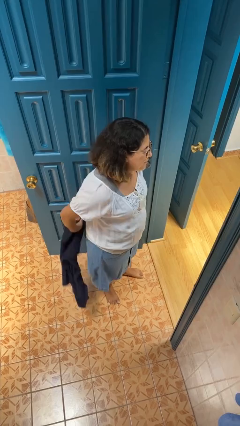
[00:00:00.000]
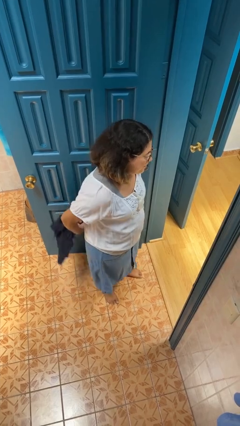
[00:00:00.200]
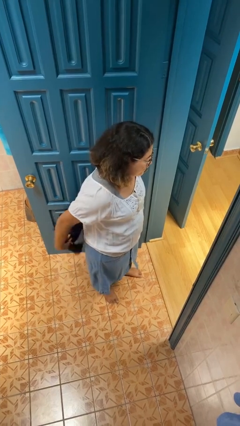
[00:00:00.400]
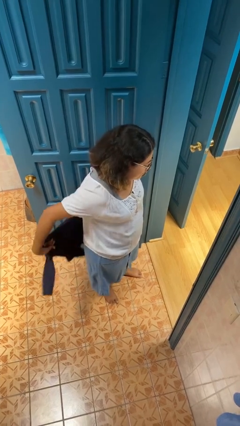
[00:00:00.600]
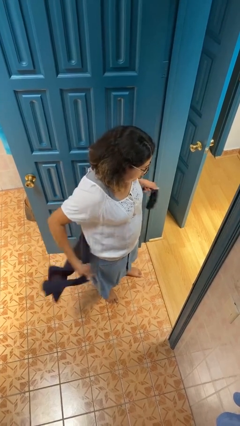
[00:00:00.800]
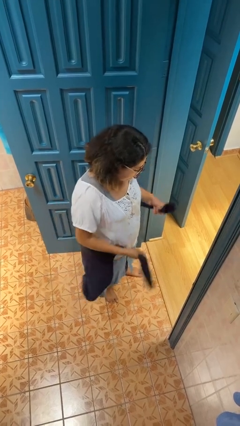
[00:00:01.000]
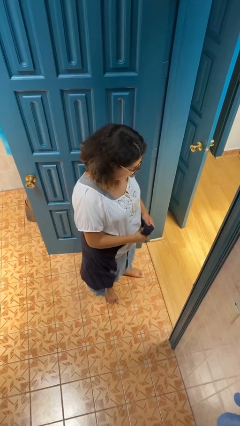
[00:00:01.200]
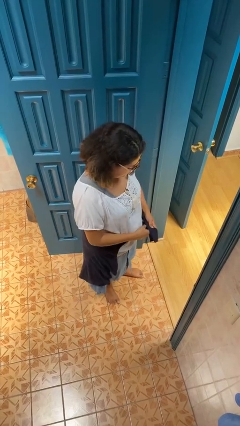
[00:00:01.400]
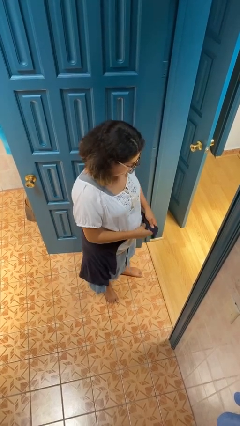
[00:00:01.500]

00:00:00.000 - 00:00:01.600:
person ties jacket around waist

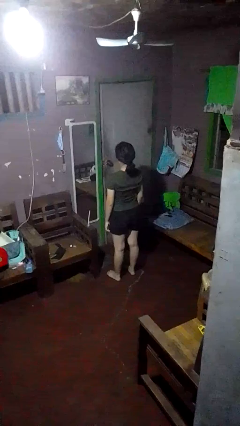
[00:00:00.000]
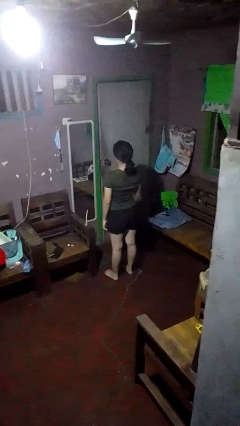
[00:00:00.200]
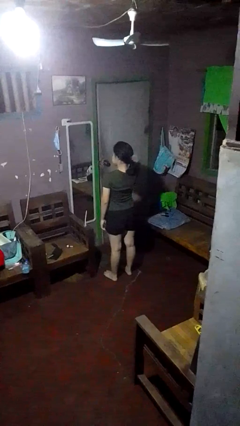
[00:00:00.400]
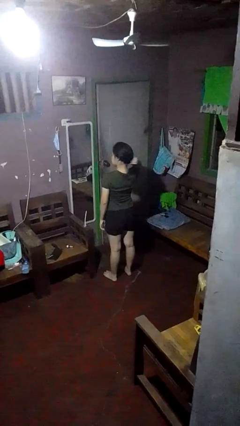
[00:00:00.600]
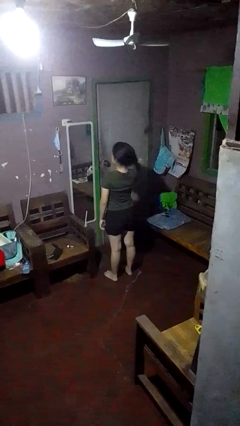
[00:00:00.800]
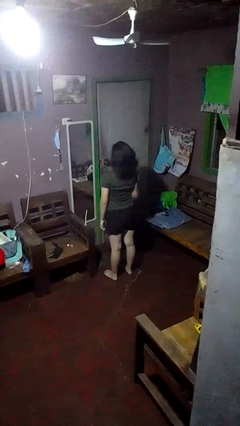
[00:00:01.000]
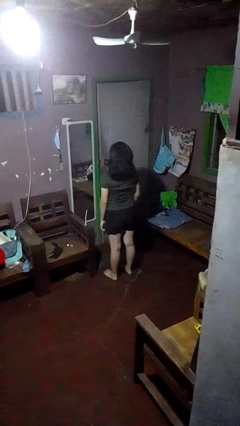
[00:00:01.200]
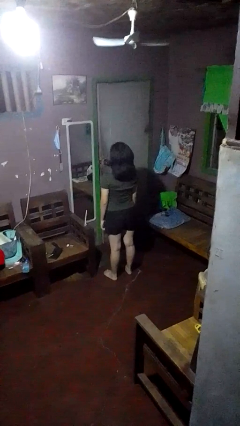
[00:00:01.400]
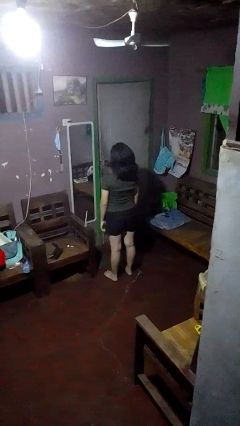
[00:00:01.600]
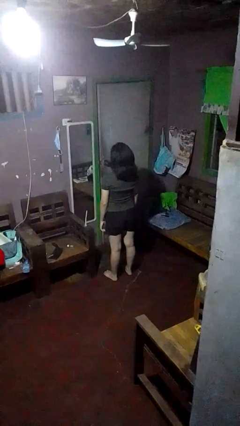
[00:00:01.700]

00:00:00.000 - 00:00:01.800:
person takes off hairtie

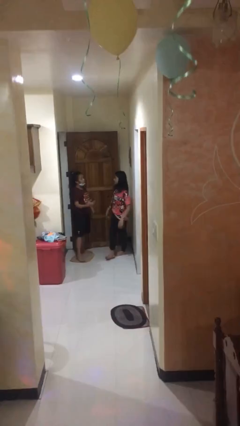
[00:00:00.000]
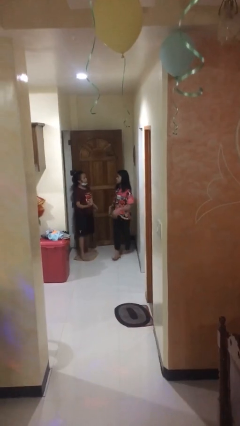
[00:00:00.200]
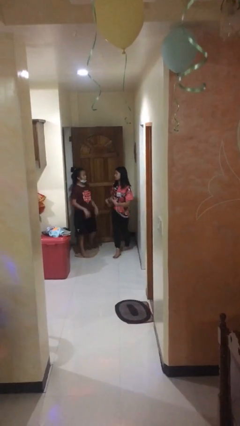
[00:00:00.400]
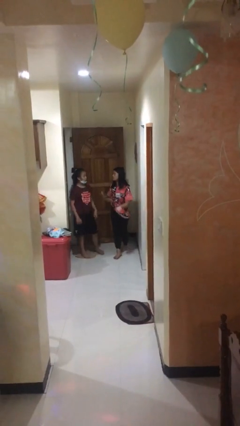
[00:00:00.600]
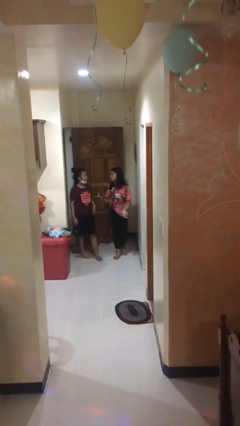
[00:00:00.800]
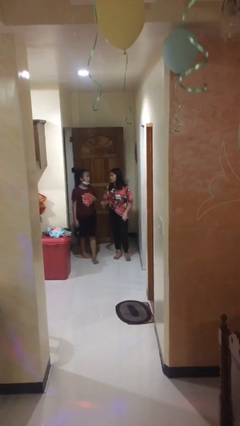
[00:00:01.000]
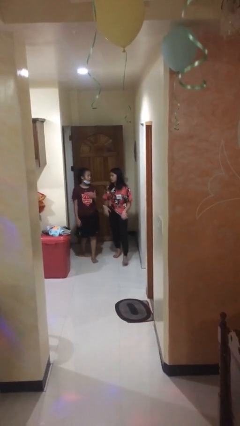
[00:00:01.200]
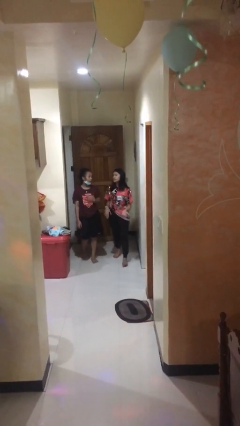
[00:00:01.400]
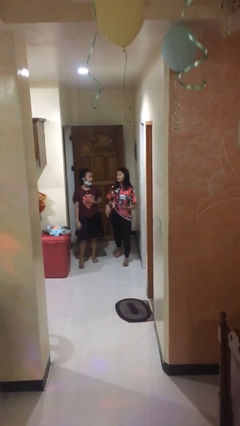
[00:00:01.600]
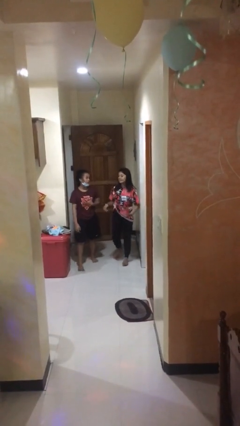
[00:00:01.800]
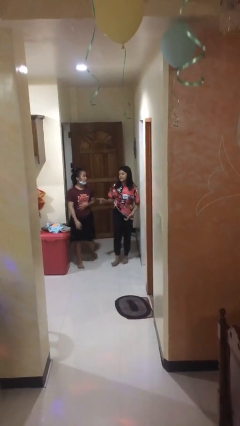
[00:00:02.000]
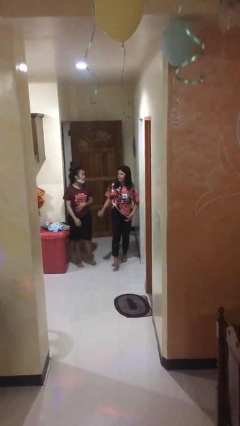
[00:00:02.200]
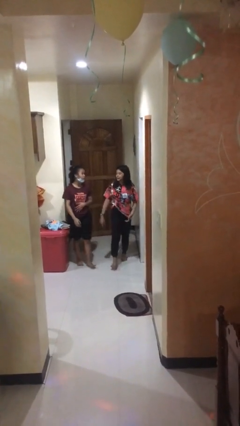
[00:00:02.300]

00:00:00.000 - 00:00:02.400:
person talks to person

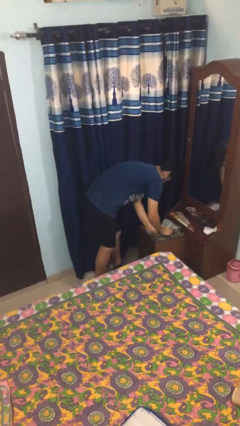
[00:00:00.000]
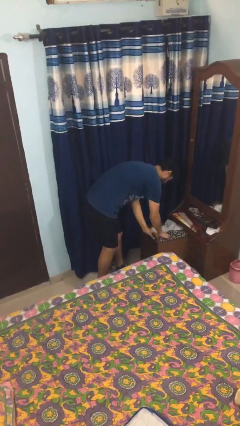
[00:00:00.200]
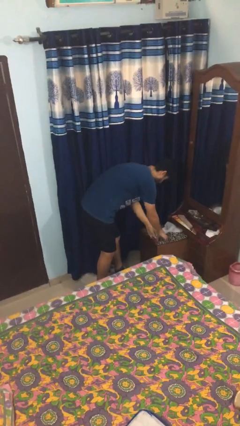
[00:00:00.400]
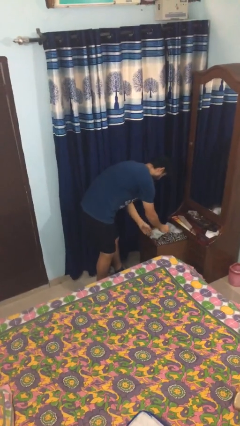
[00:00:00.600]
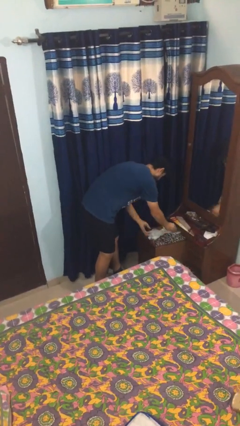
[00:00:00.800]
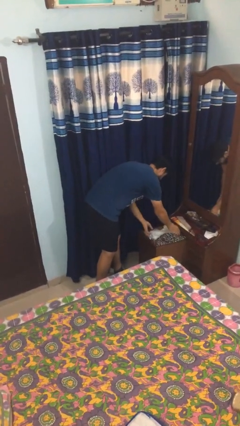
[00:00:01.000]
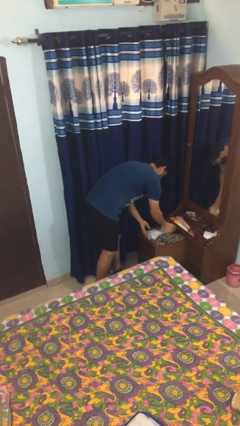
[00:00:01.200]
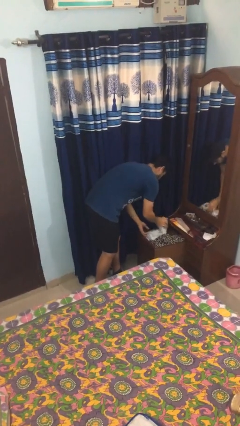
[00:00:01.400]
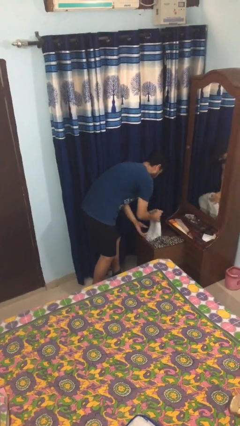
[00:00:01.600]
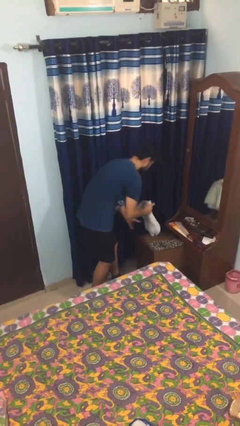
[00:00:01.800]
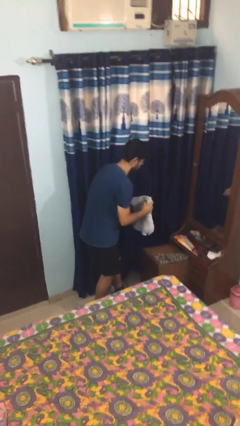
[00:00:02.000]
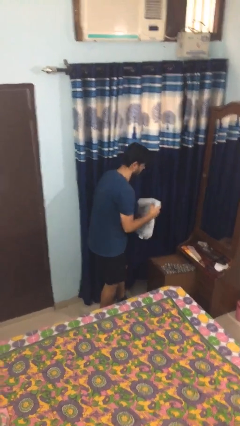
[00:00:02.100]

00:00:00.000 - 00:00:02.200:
person takes clothes from dresser

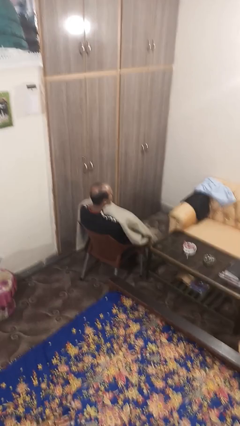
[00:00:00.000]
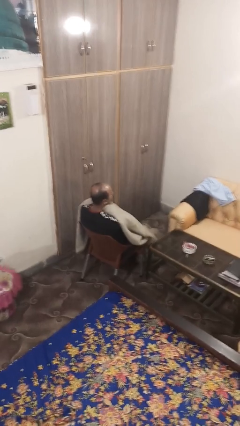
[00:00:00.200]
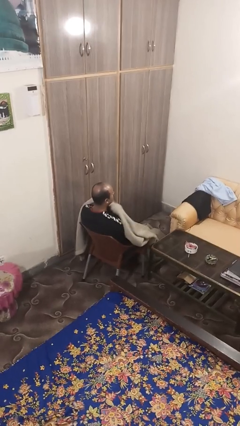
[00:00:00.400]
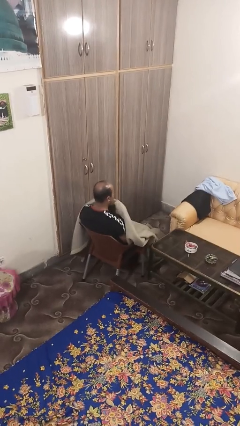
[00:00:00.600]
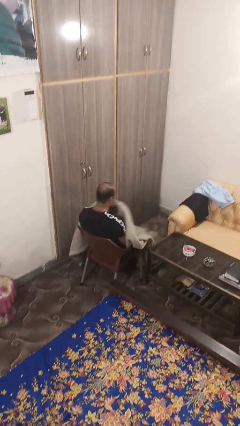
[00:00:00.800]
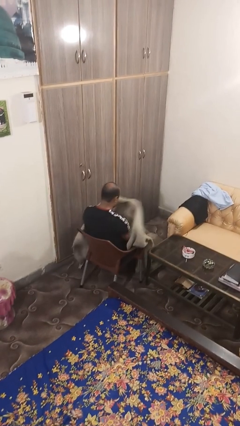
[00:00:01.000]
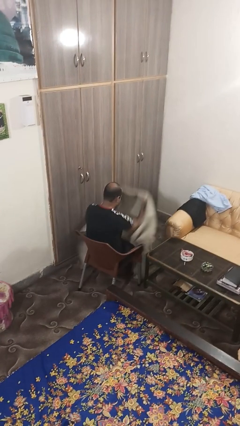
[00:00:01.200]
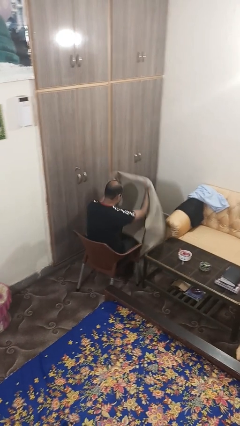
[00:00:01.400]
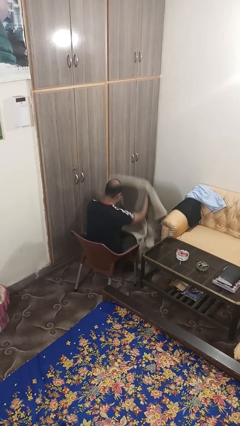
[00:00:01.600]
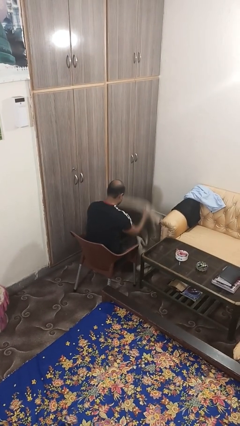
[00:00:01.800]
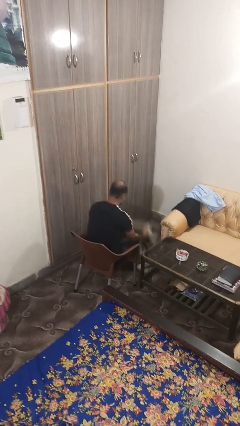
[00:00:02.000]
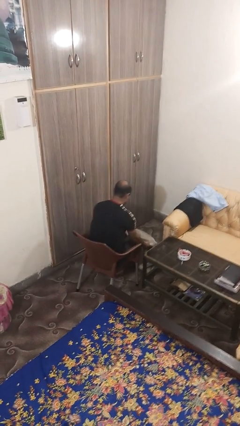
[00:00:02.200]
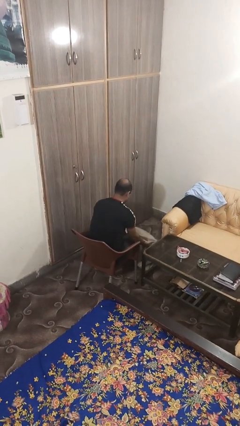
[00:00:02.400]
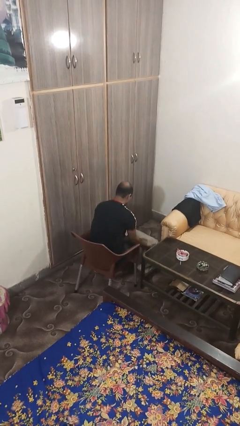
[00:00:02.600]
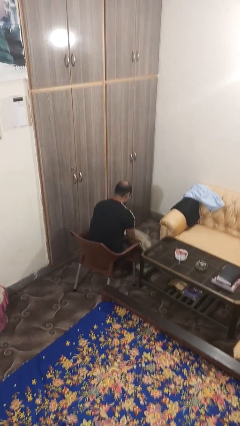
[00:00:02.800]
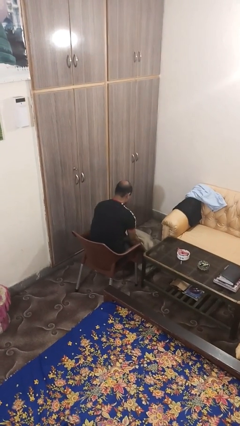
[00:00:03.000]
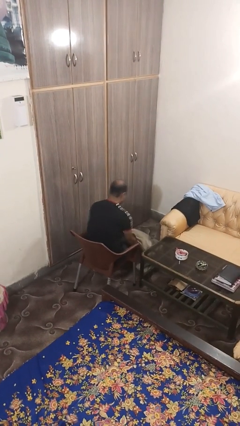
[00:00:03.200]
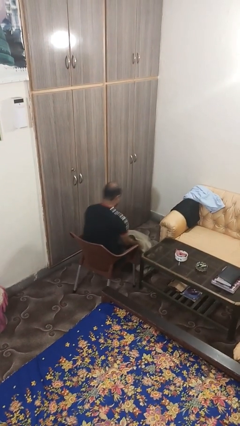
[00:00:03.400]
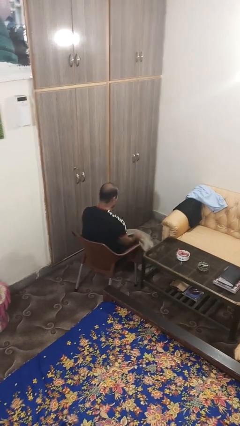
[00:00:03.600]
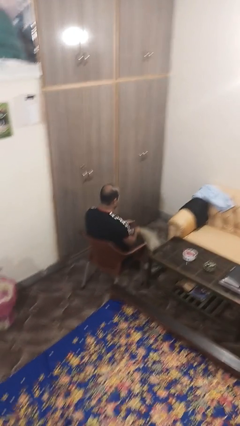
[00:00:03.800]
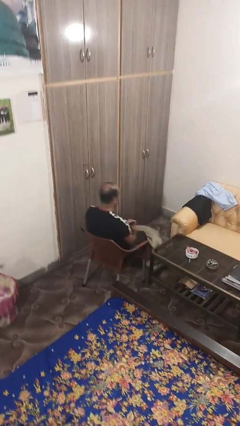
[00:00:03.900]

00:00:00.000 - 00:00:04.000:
person uncovers with blanket

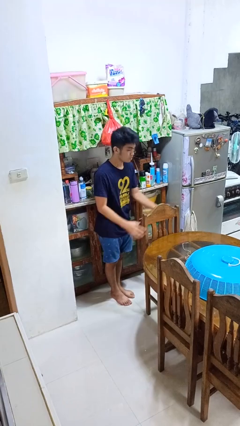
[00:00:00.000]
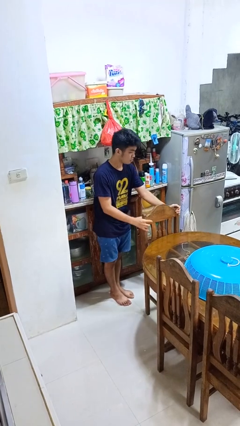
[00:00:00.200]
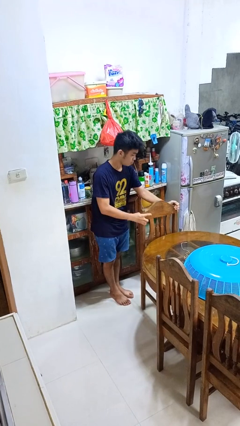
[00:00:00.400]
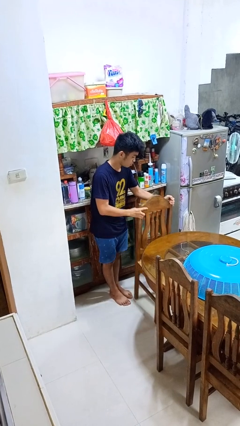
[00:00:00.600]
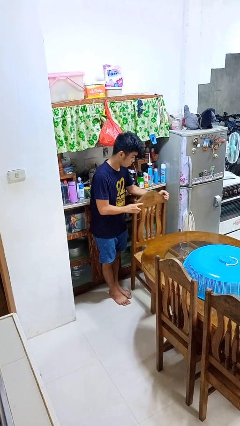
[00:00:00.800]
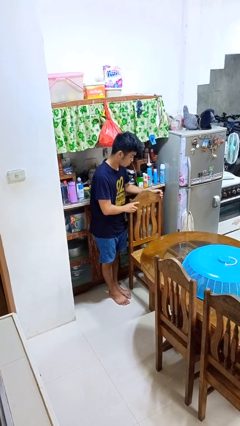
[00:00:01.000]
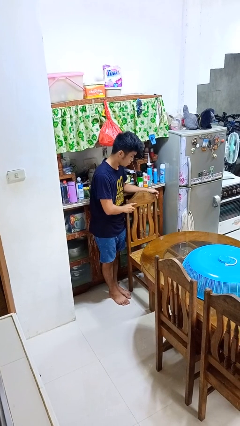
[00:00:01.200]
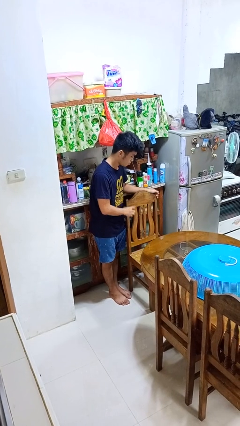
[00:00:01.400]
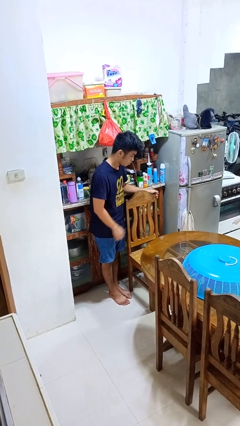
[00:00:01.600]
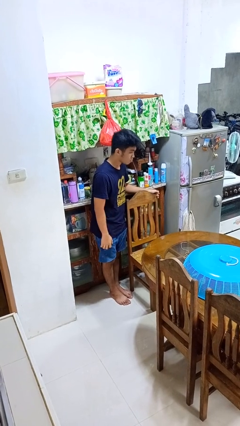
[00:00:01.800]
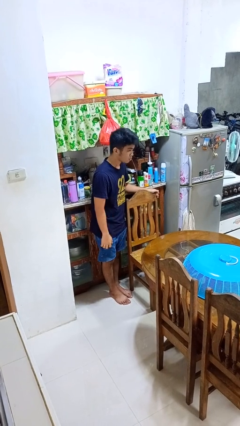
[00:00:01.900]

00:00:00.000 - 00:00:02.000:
person pulls out chair

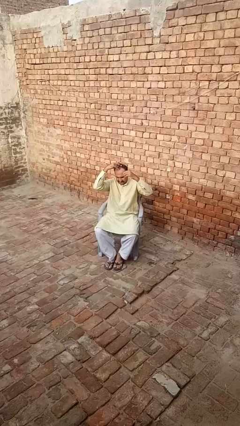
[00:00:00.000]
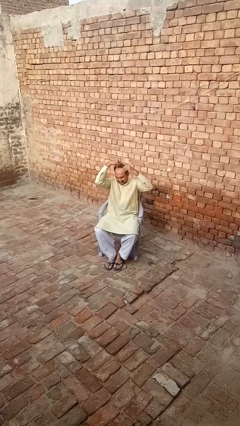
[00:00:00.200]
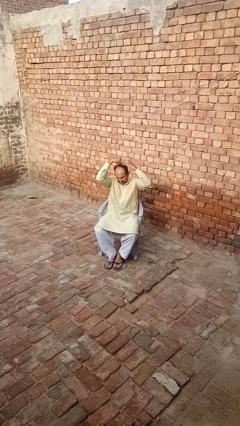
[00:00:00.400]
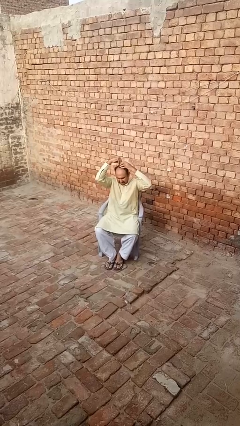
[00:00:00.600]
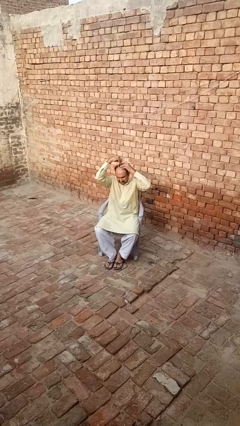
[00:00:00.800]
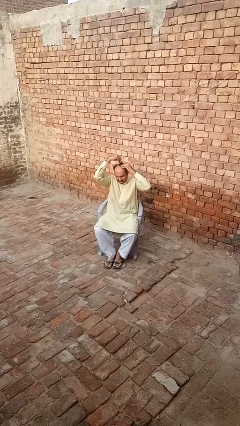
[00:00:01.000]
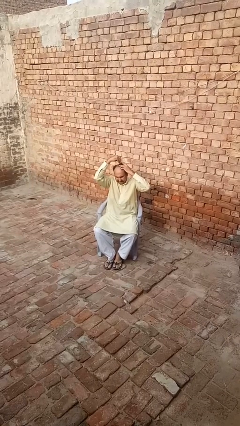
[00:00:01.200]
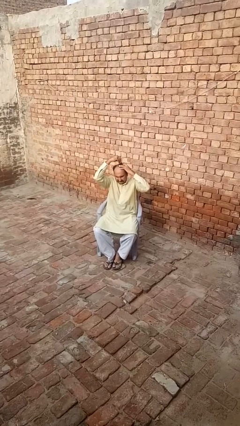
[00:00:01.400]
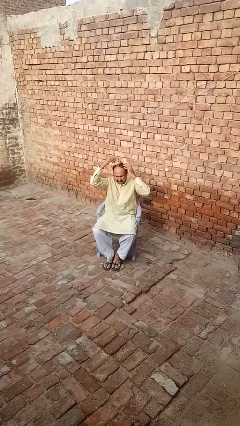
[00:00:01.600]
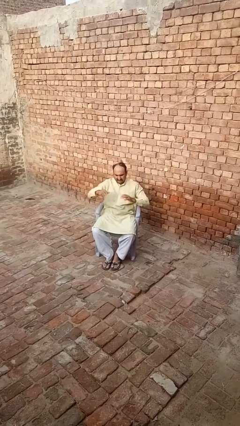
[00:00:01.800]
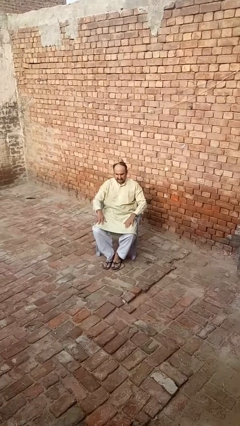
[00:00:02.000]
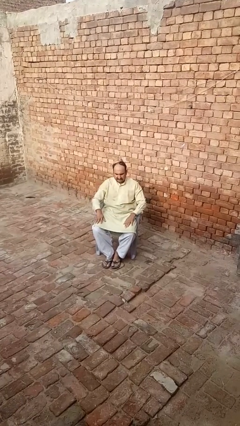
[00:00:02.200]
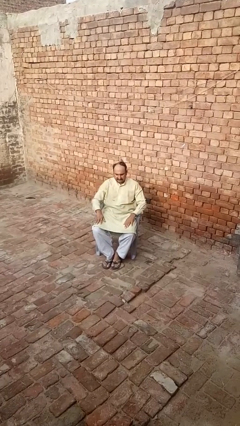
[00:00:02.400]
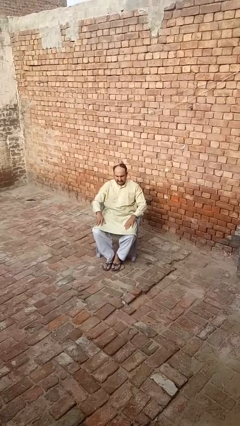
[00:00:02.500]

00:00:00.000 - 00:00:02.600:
person puts hair in ponytail

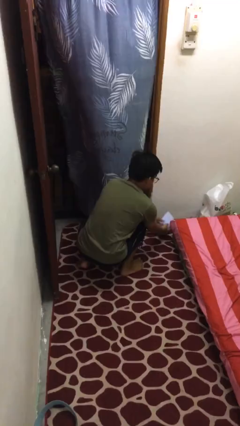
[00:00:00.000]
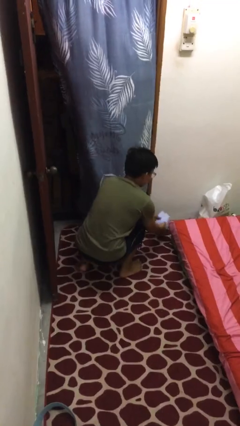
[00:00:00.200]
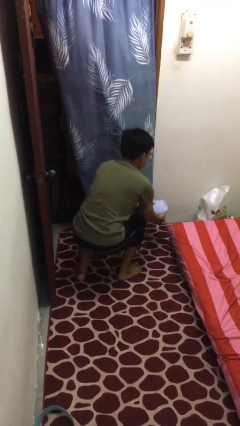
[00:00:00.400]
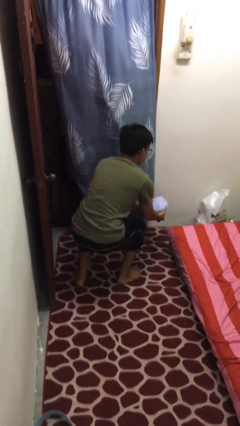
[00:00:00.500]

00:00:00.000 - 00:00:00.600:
person picks up object from floor
